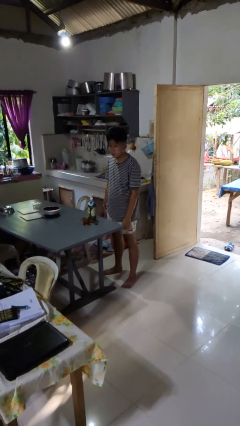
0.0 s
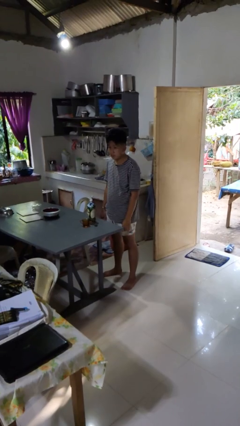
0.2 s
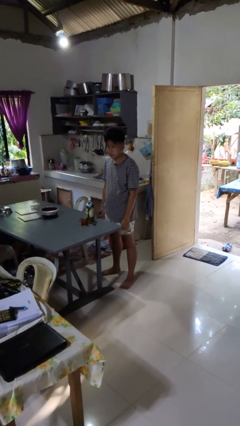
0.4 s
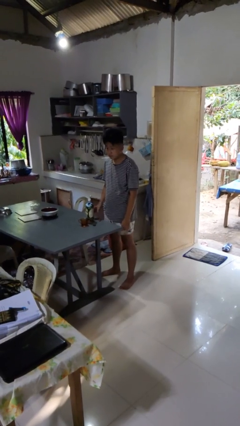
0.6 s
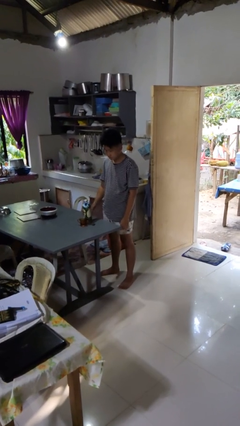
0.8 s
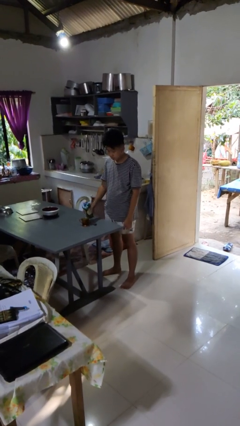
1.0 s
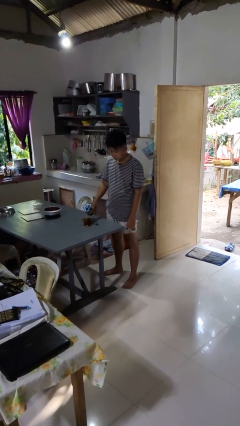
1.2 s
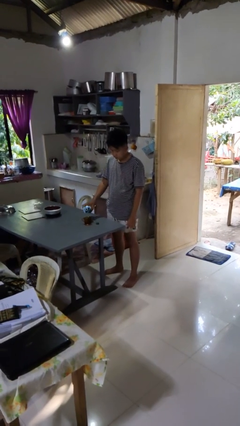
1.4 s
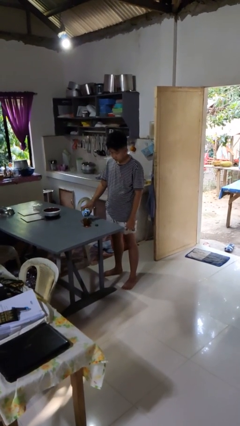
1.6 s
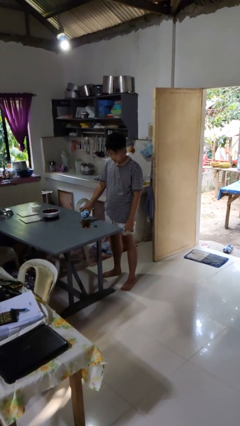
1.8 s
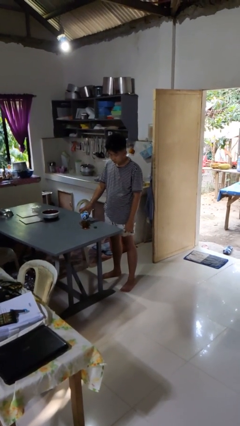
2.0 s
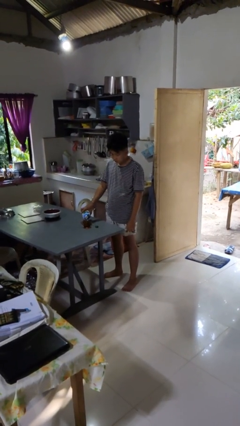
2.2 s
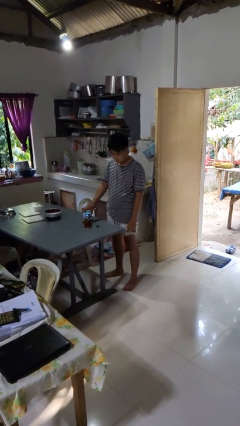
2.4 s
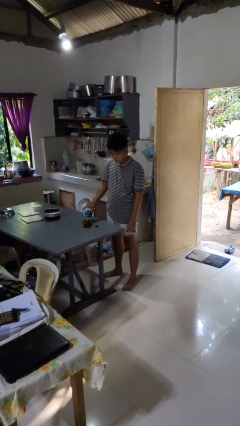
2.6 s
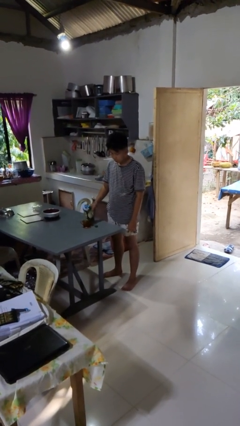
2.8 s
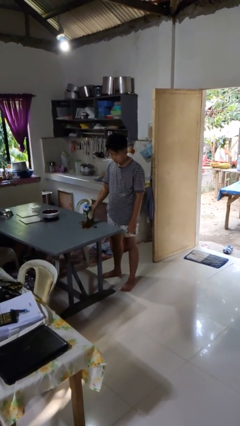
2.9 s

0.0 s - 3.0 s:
person pours liquid into cup

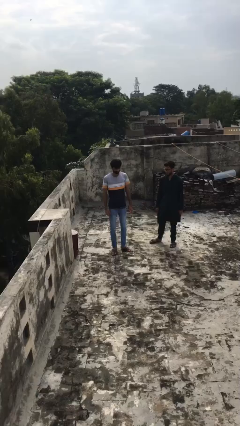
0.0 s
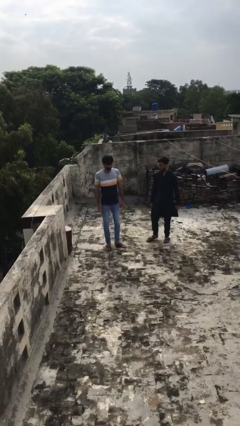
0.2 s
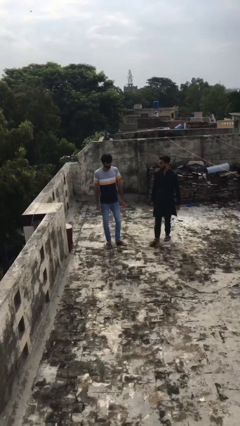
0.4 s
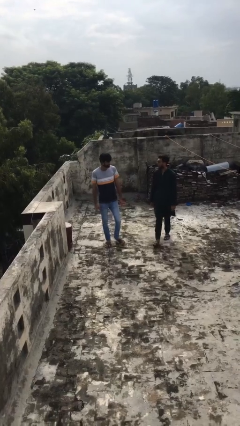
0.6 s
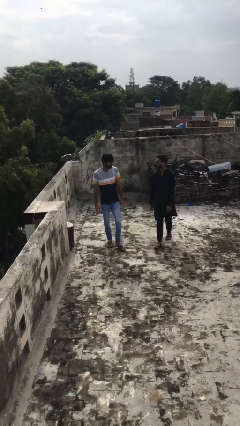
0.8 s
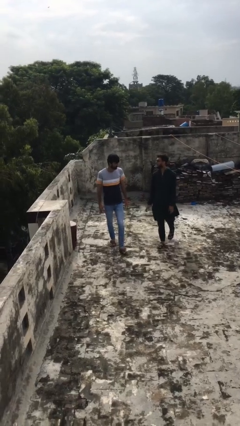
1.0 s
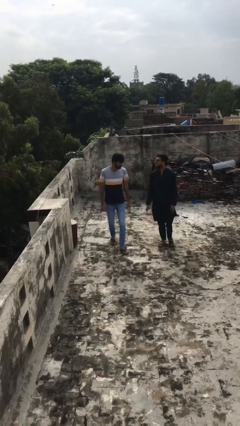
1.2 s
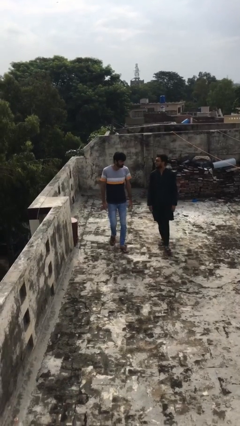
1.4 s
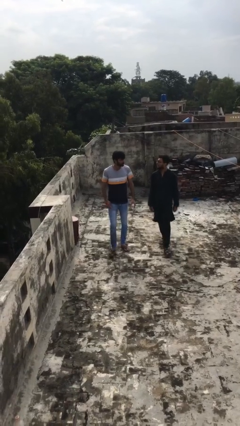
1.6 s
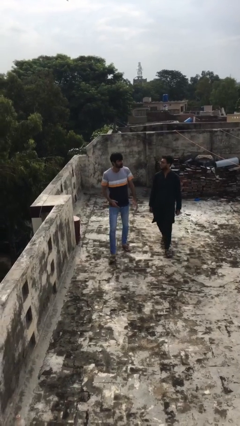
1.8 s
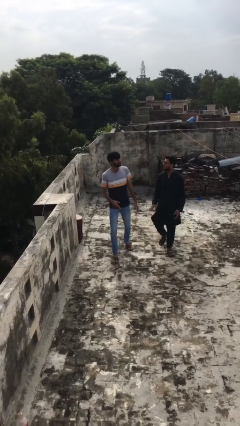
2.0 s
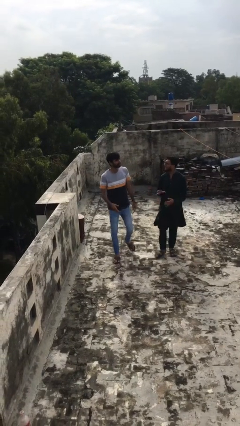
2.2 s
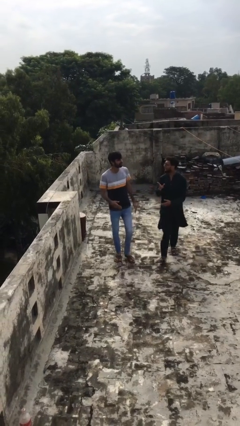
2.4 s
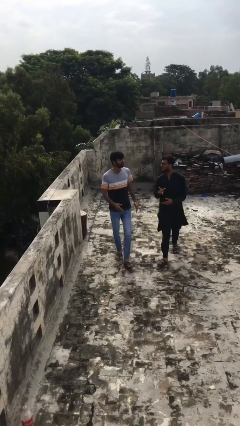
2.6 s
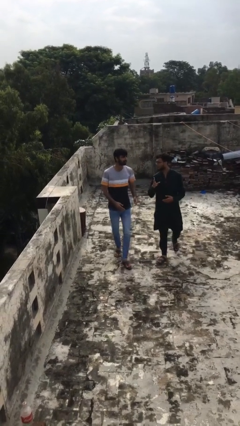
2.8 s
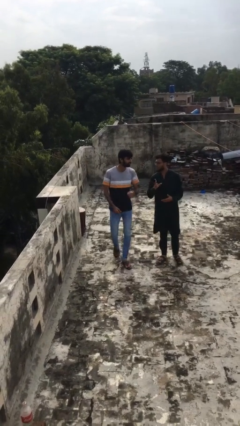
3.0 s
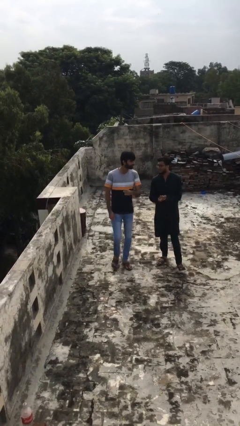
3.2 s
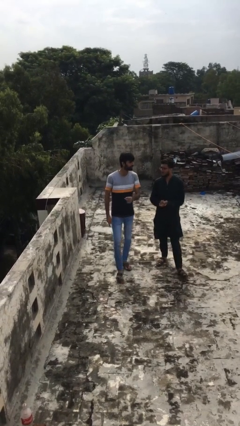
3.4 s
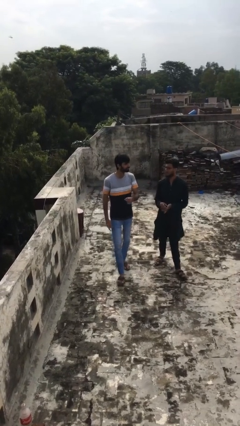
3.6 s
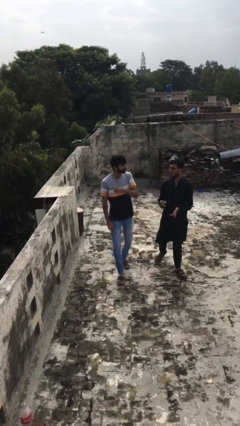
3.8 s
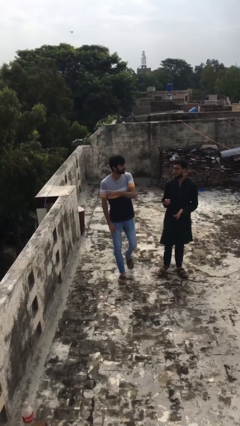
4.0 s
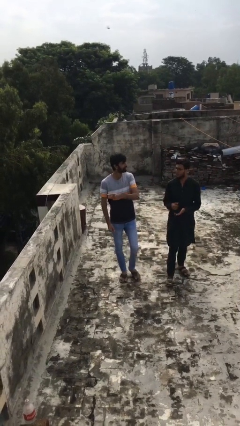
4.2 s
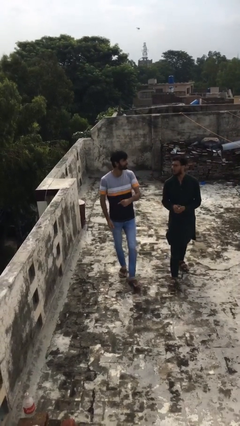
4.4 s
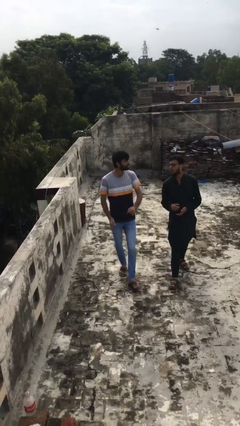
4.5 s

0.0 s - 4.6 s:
person talks to person

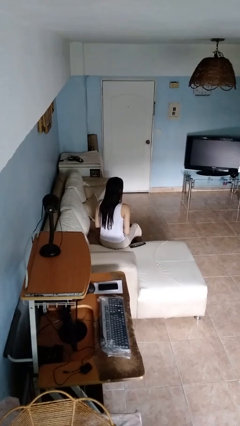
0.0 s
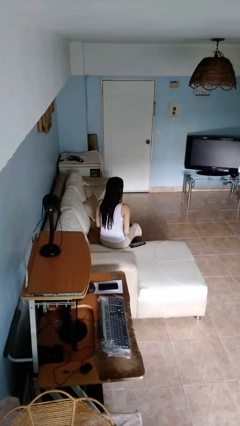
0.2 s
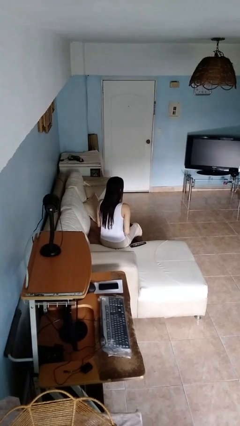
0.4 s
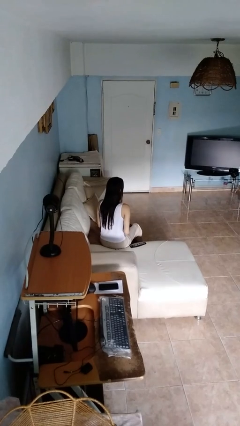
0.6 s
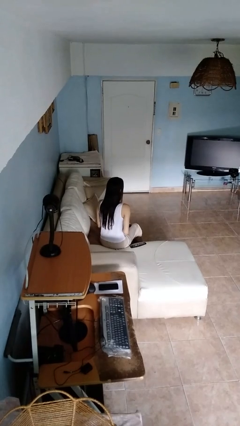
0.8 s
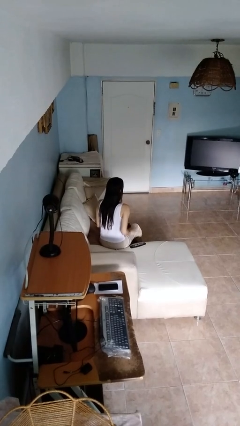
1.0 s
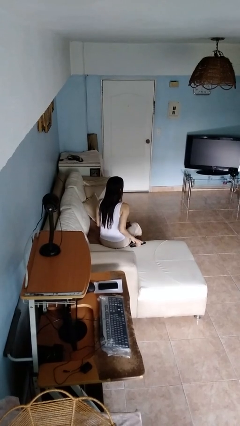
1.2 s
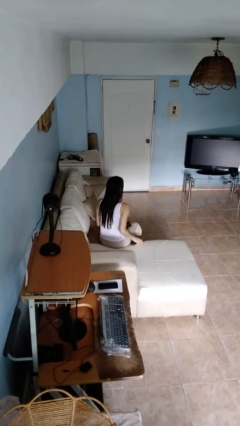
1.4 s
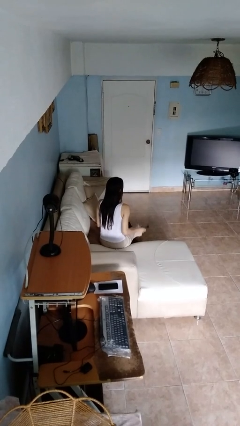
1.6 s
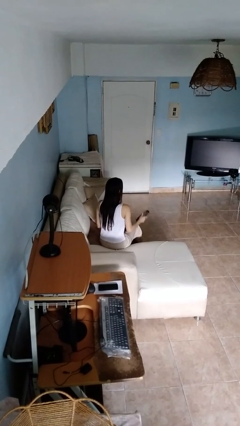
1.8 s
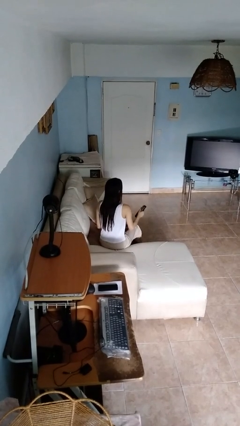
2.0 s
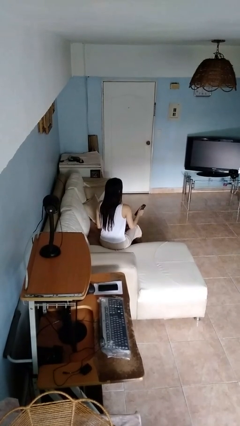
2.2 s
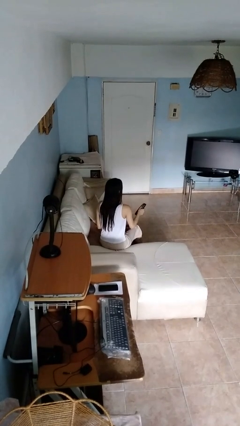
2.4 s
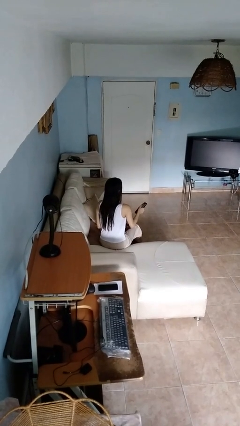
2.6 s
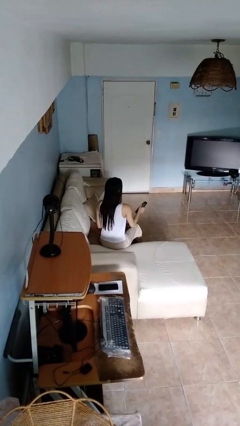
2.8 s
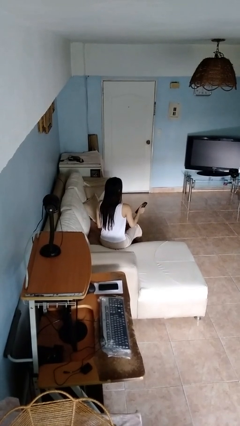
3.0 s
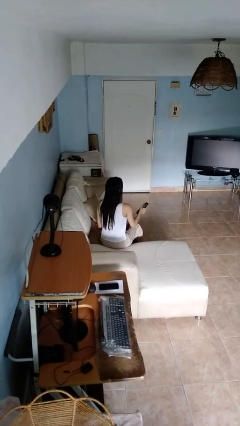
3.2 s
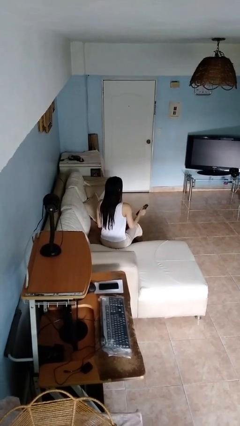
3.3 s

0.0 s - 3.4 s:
person uses television remote

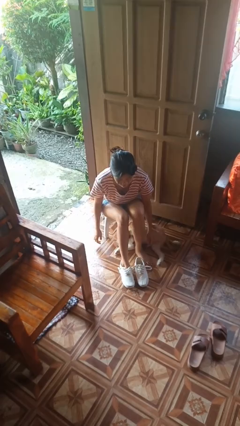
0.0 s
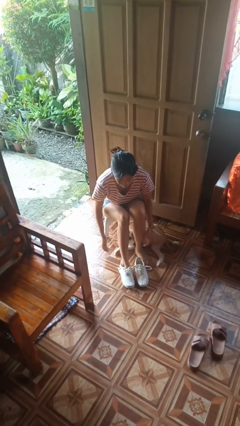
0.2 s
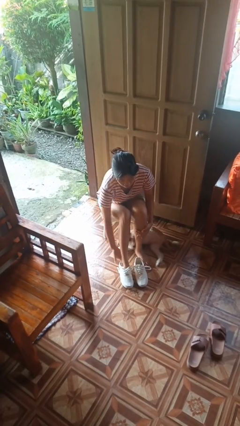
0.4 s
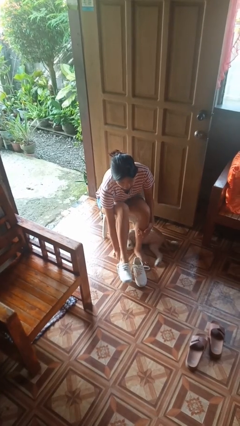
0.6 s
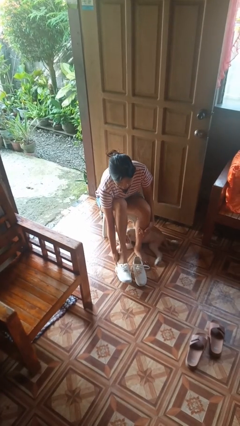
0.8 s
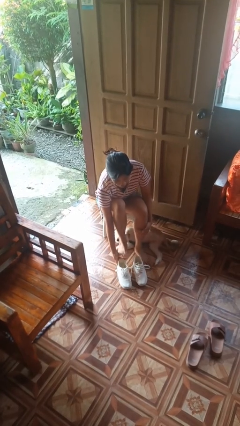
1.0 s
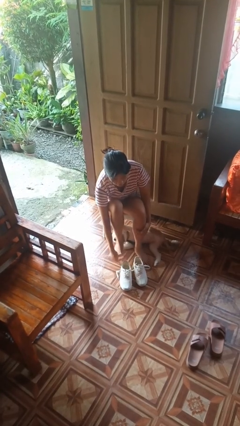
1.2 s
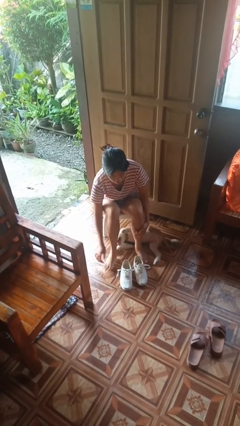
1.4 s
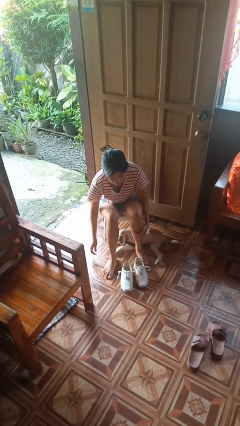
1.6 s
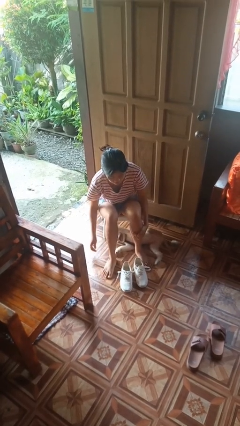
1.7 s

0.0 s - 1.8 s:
person takes off shoes

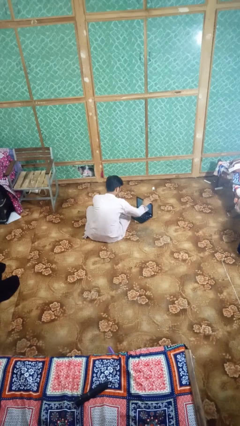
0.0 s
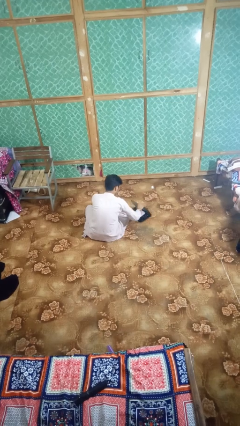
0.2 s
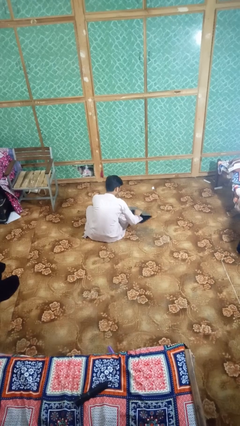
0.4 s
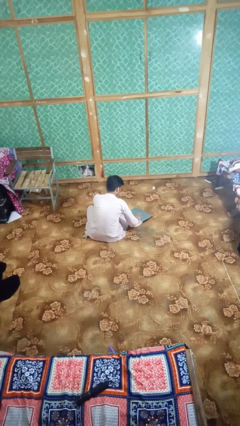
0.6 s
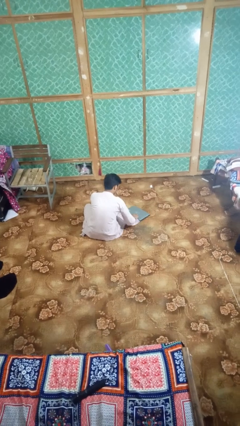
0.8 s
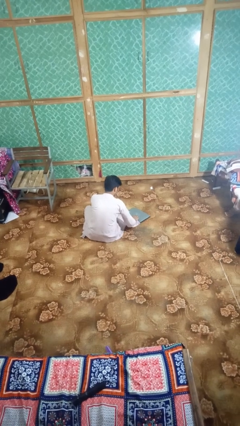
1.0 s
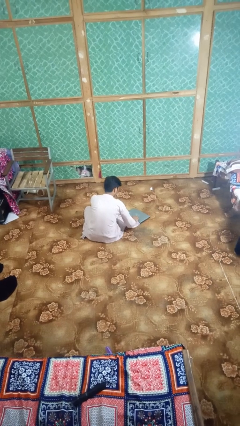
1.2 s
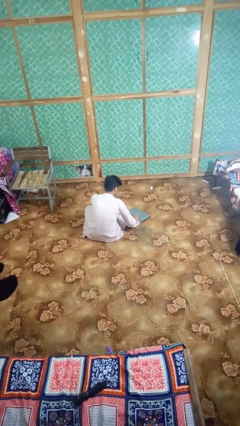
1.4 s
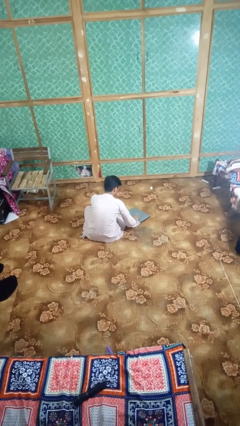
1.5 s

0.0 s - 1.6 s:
person closes laptop

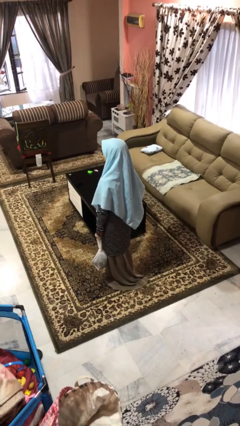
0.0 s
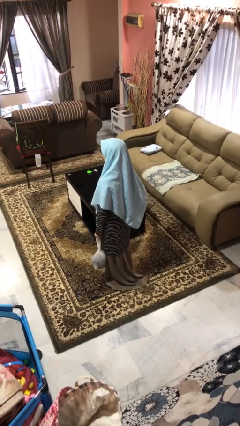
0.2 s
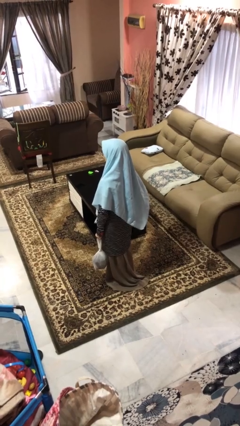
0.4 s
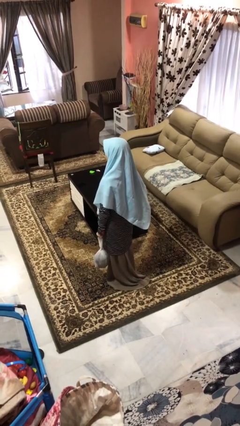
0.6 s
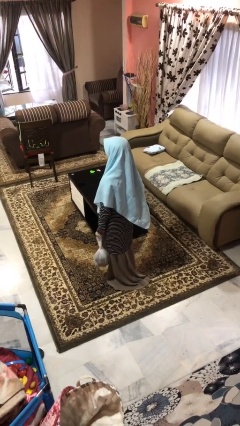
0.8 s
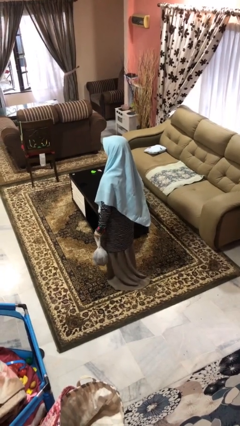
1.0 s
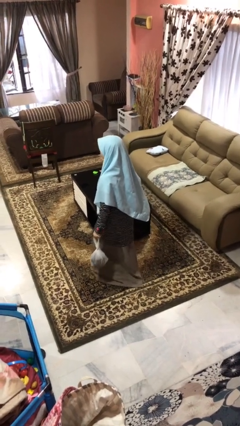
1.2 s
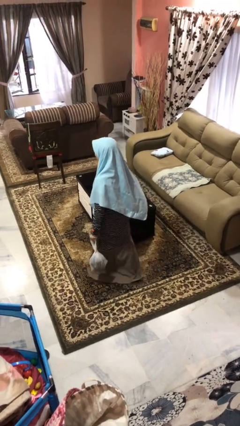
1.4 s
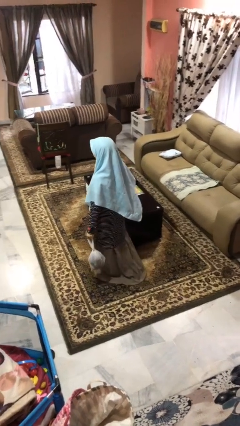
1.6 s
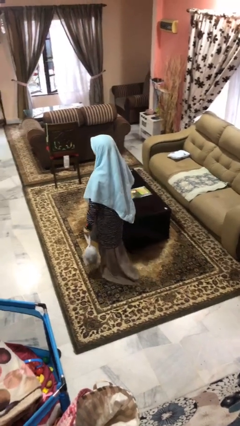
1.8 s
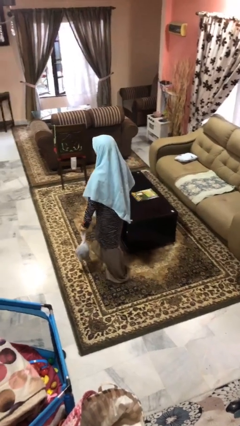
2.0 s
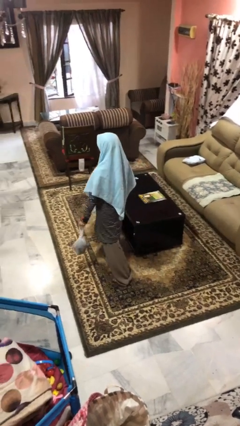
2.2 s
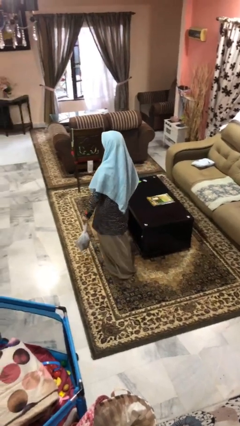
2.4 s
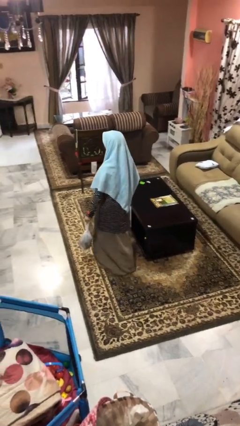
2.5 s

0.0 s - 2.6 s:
person carries groceries
